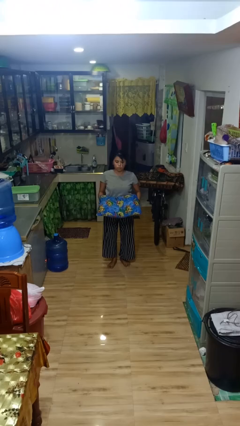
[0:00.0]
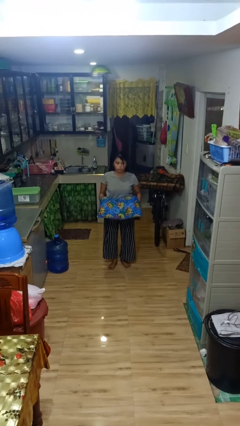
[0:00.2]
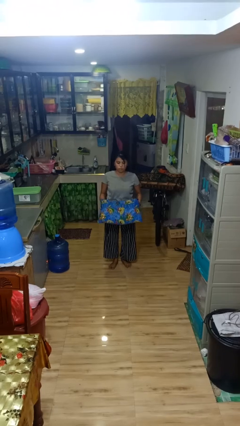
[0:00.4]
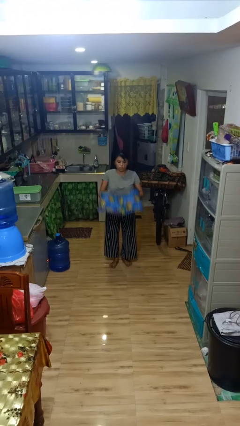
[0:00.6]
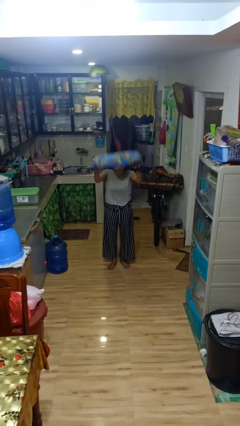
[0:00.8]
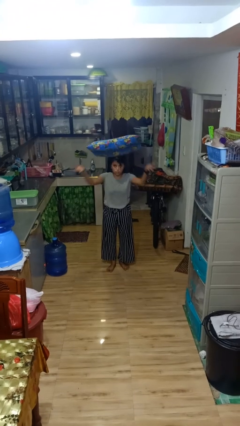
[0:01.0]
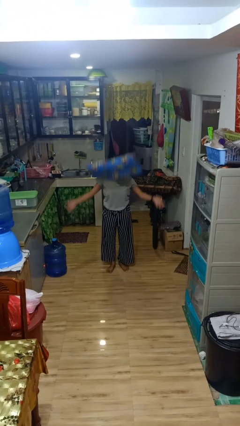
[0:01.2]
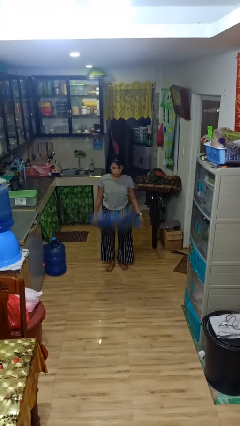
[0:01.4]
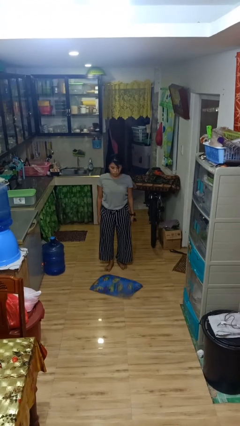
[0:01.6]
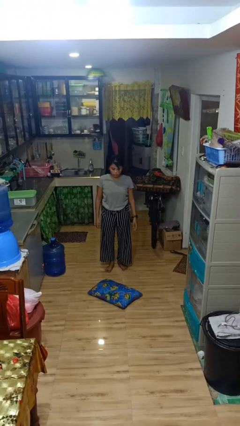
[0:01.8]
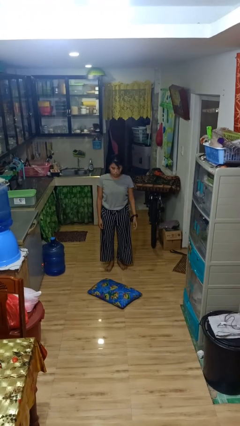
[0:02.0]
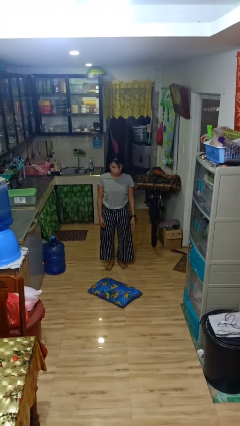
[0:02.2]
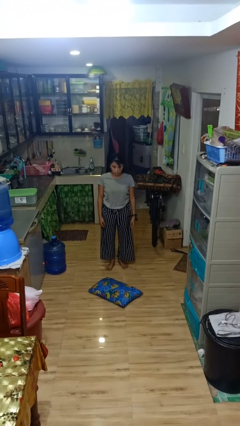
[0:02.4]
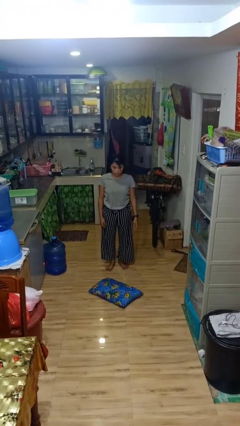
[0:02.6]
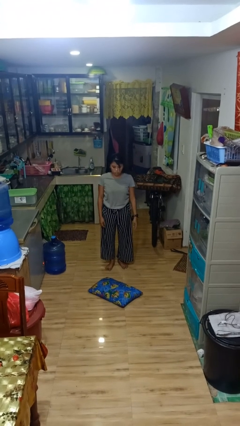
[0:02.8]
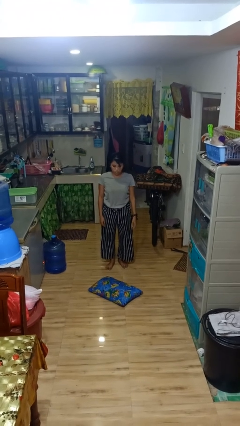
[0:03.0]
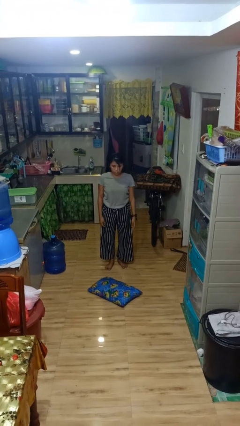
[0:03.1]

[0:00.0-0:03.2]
person throws object into air

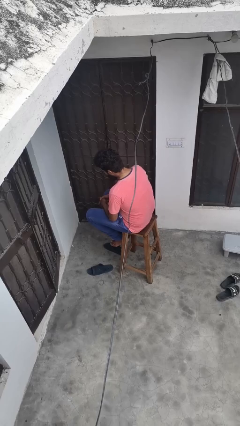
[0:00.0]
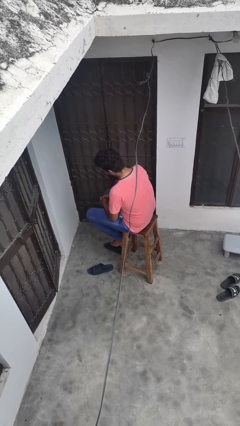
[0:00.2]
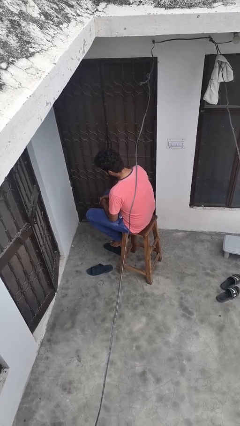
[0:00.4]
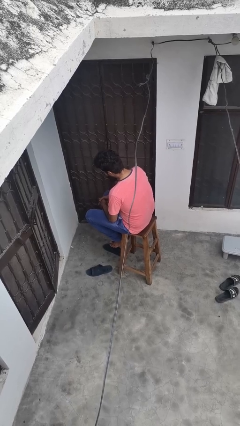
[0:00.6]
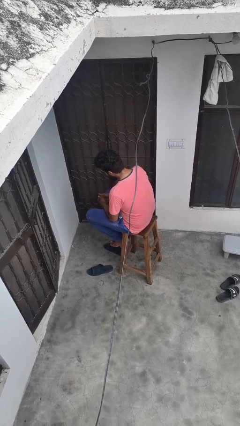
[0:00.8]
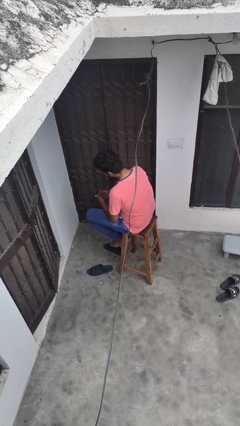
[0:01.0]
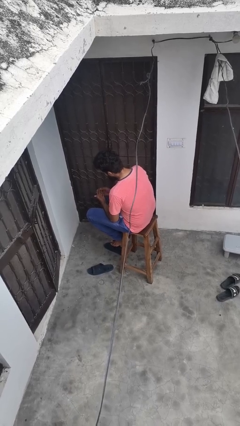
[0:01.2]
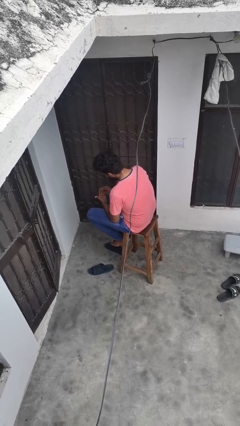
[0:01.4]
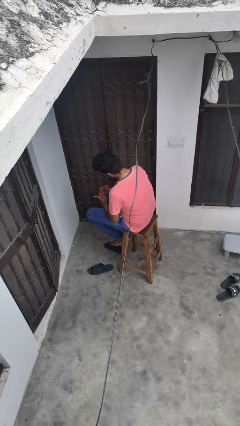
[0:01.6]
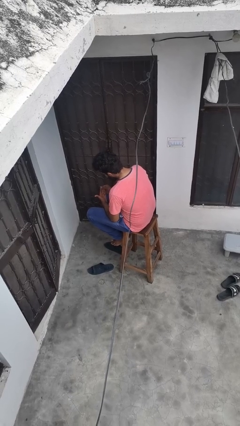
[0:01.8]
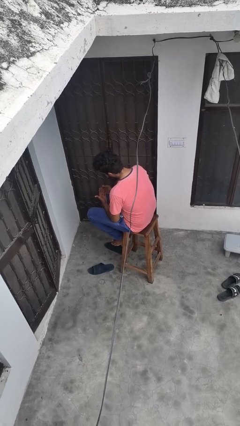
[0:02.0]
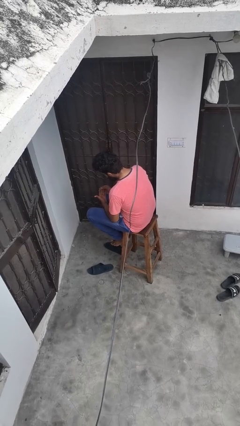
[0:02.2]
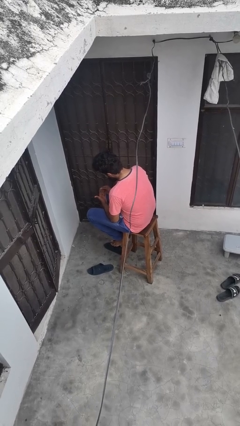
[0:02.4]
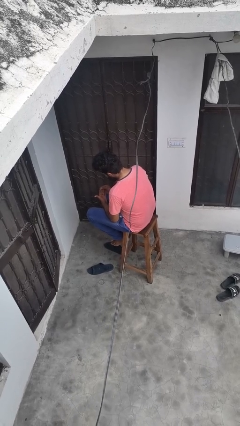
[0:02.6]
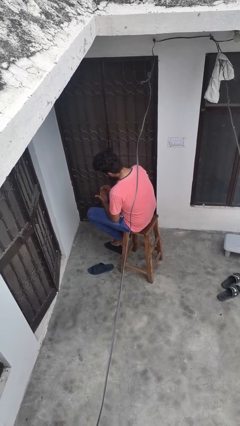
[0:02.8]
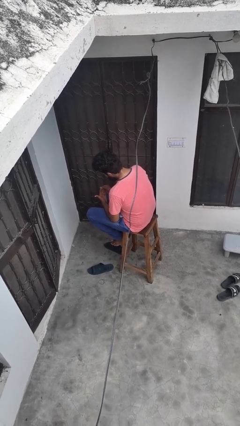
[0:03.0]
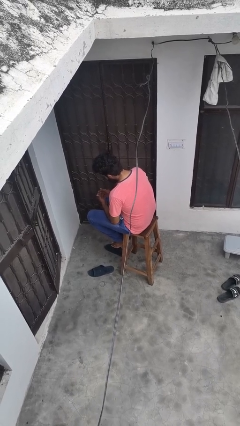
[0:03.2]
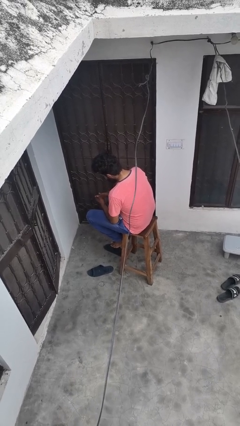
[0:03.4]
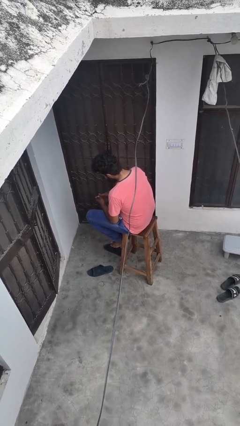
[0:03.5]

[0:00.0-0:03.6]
person looks at hands in lap

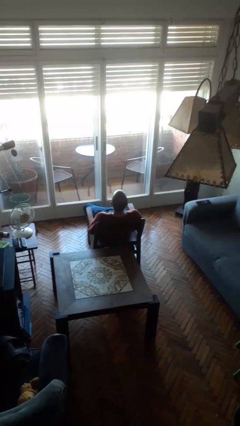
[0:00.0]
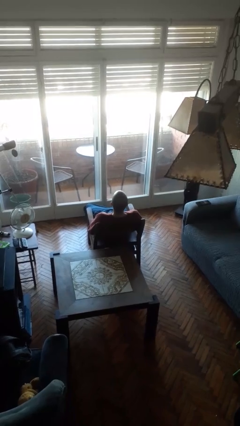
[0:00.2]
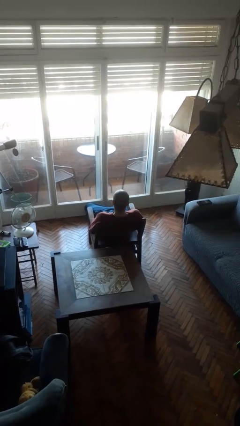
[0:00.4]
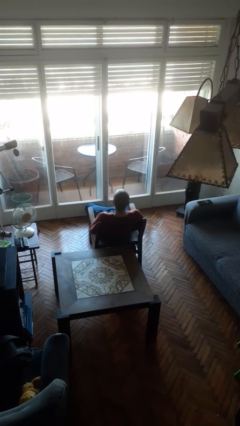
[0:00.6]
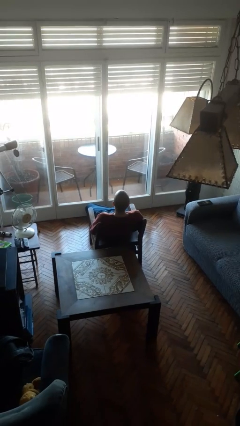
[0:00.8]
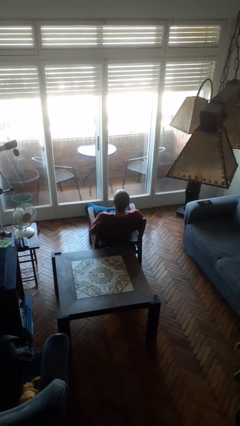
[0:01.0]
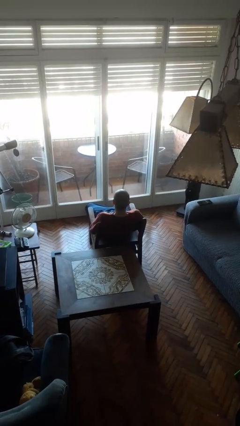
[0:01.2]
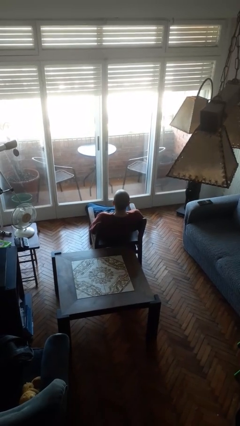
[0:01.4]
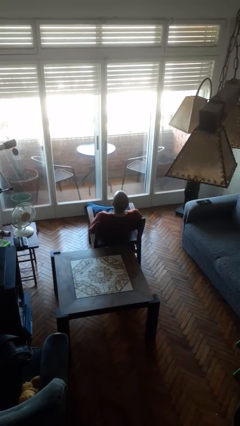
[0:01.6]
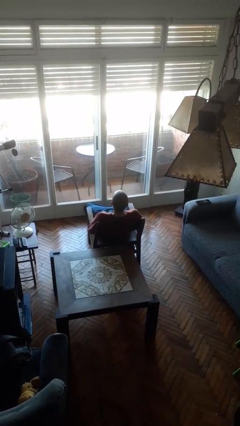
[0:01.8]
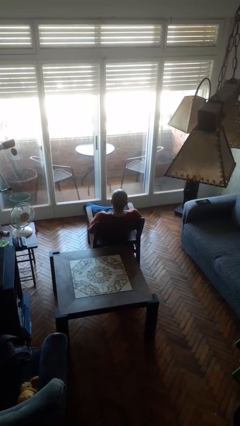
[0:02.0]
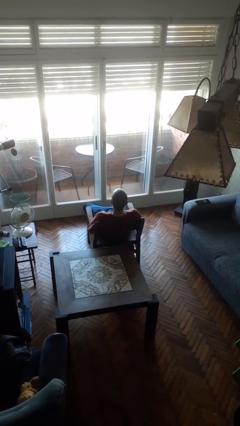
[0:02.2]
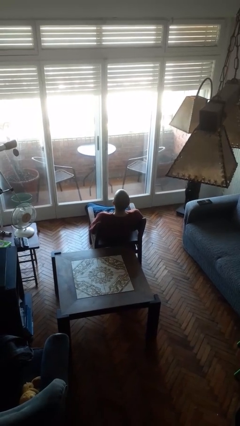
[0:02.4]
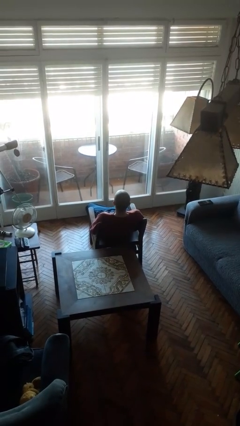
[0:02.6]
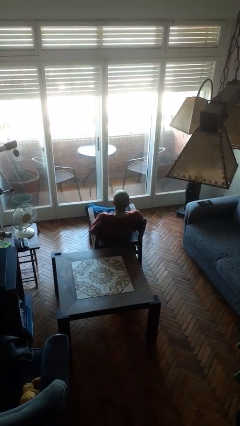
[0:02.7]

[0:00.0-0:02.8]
person nods head

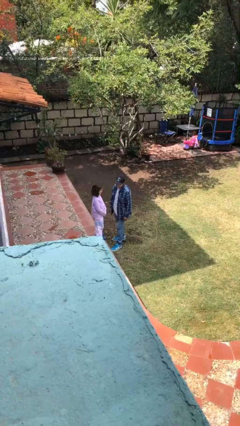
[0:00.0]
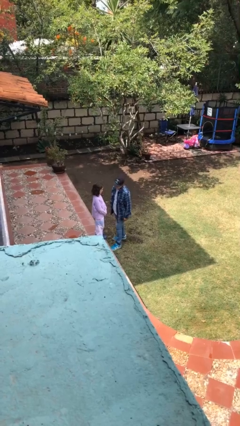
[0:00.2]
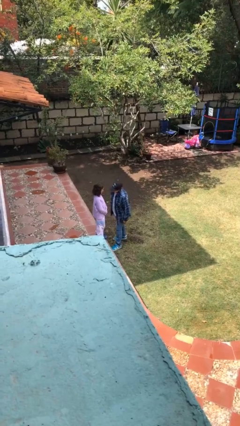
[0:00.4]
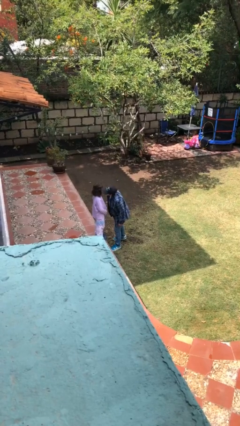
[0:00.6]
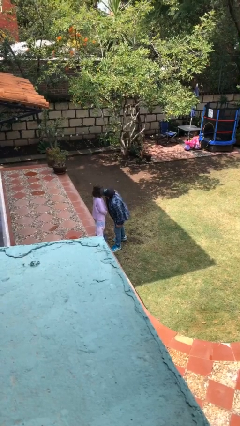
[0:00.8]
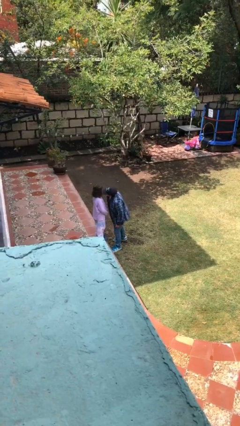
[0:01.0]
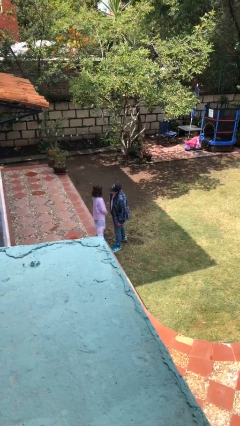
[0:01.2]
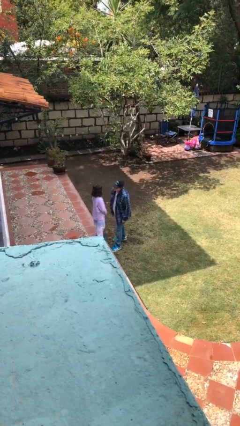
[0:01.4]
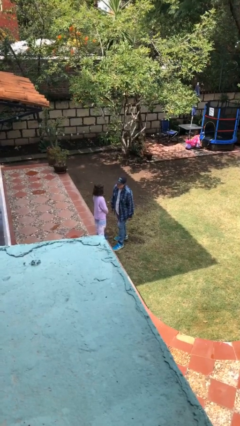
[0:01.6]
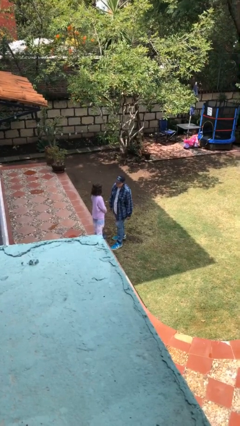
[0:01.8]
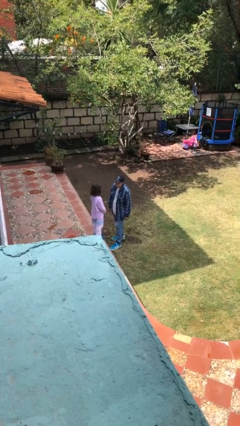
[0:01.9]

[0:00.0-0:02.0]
person kisses cheek of person

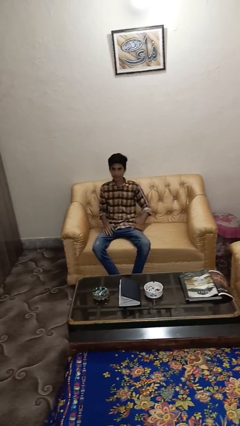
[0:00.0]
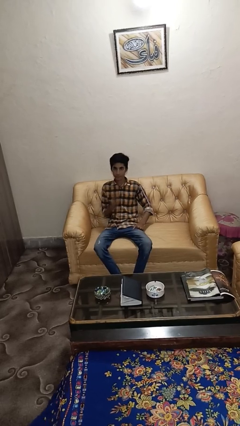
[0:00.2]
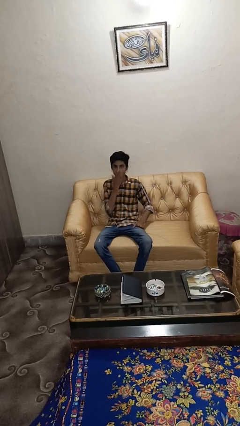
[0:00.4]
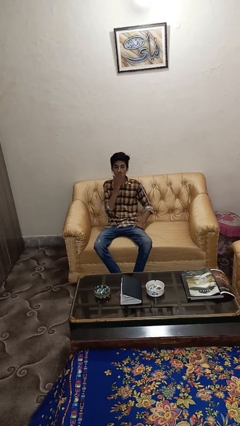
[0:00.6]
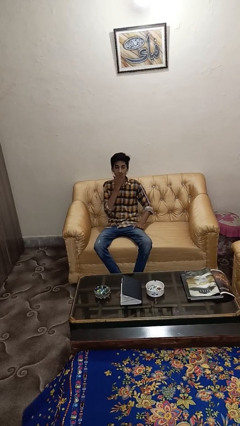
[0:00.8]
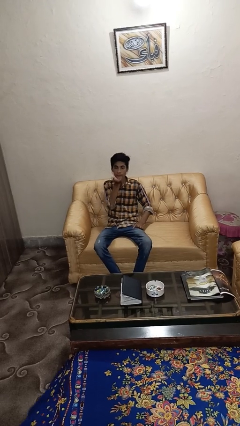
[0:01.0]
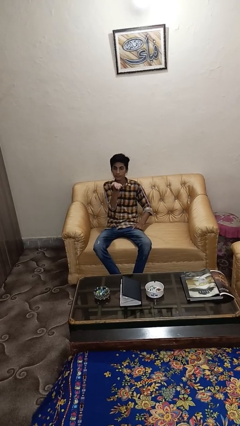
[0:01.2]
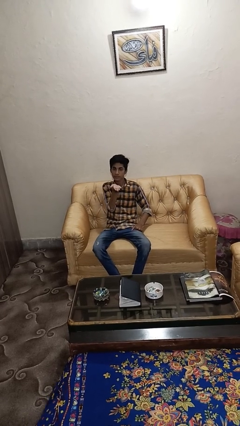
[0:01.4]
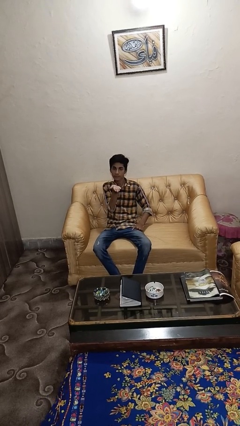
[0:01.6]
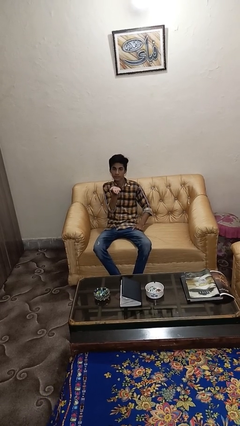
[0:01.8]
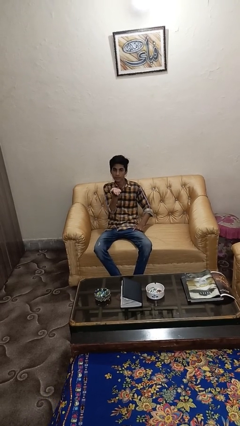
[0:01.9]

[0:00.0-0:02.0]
person gestures blow kiss

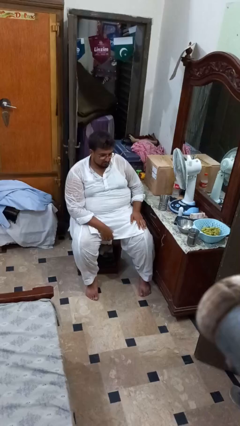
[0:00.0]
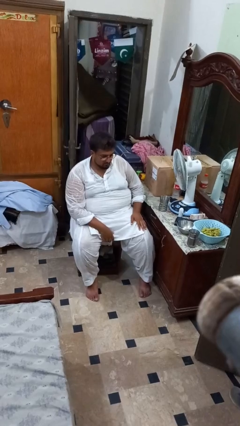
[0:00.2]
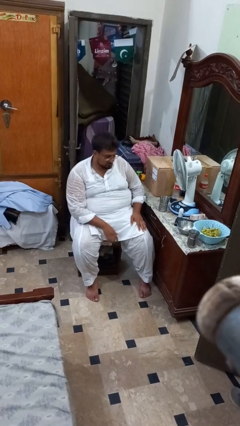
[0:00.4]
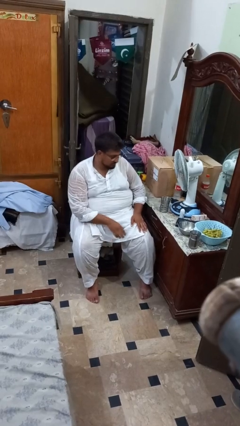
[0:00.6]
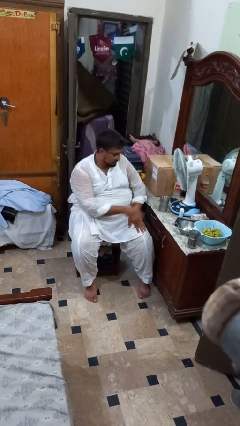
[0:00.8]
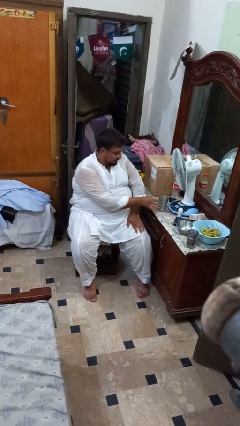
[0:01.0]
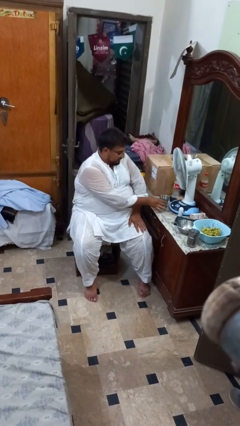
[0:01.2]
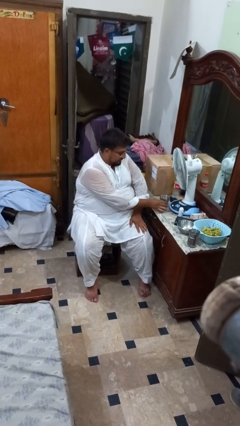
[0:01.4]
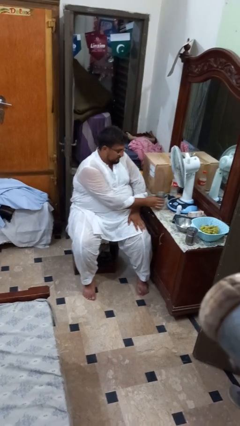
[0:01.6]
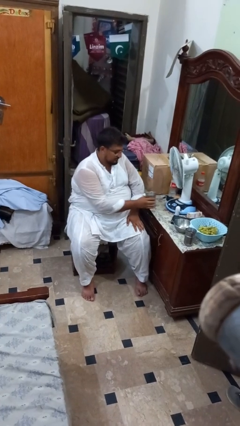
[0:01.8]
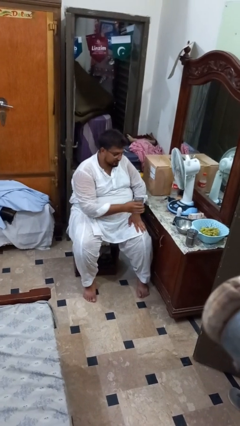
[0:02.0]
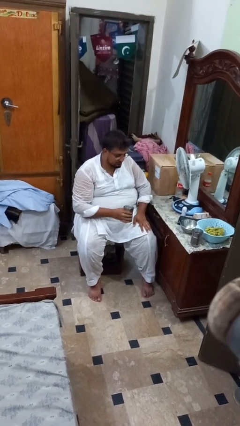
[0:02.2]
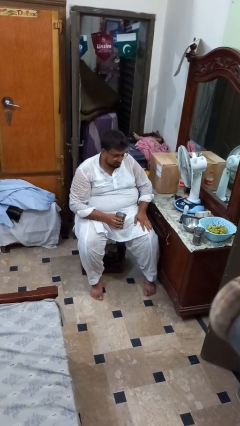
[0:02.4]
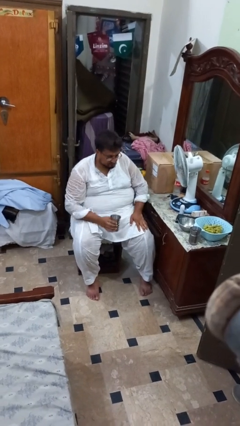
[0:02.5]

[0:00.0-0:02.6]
person picks up object from table

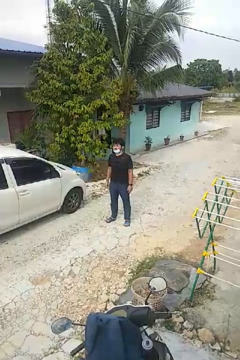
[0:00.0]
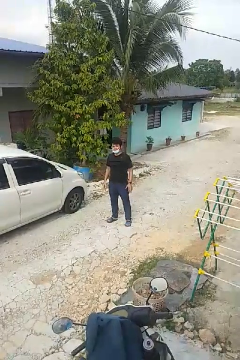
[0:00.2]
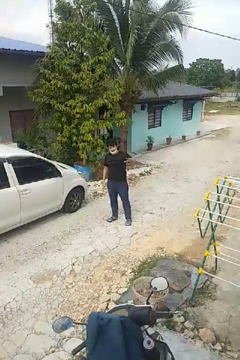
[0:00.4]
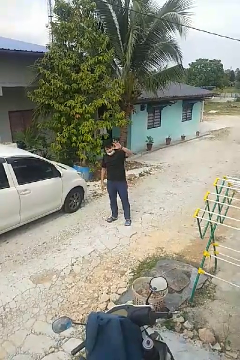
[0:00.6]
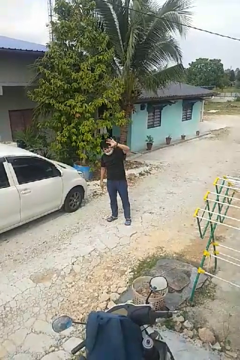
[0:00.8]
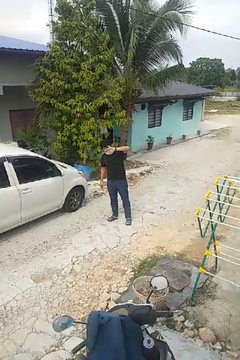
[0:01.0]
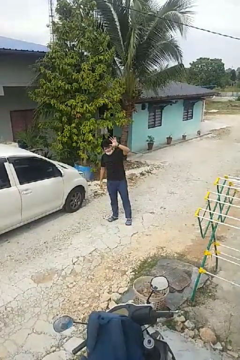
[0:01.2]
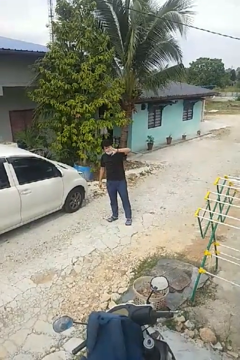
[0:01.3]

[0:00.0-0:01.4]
person waves at person
